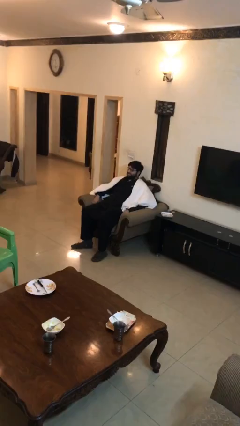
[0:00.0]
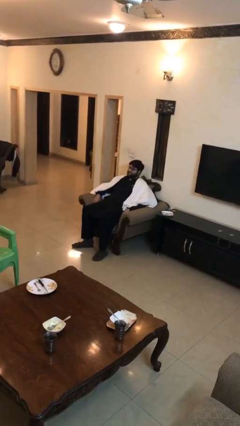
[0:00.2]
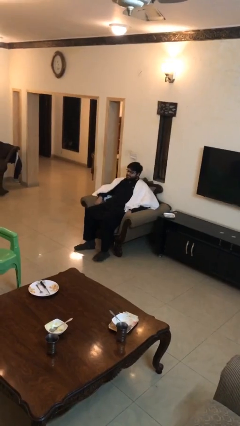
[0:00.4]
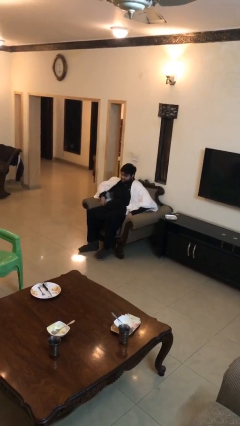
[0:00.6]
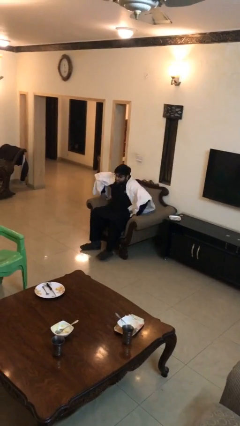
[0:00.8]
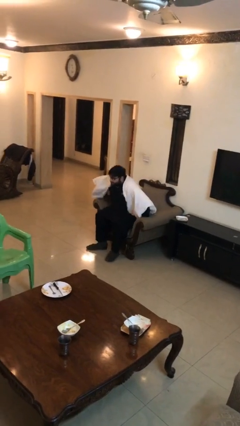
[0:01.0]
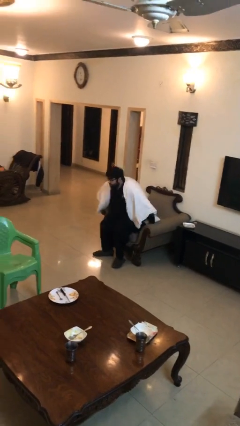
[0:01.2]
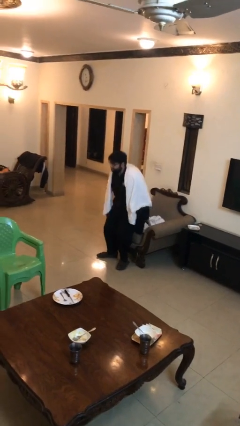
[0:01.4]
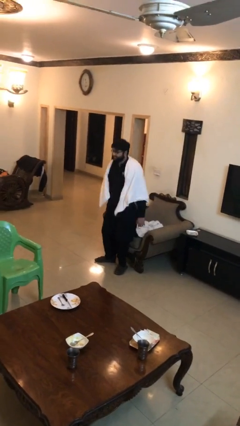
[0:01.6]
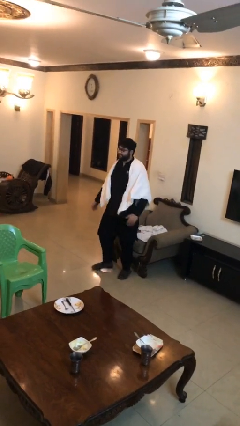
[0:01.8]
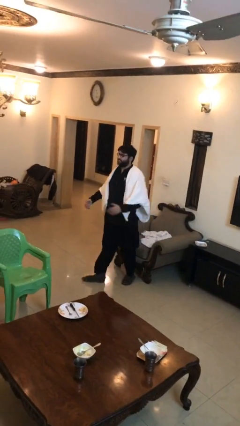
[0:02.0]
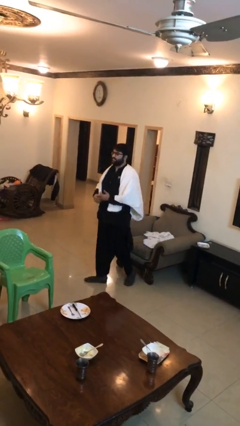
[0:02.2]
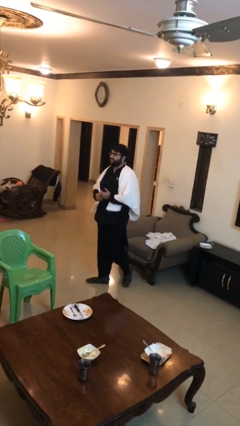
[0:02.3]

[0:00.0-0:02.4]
person stands up

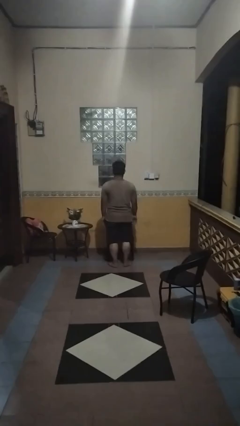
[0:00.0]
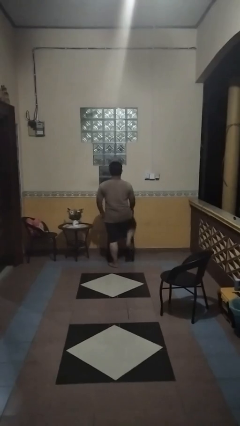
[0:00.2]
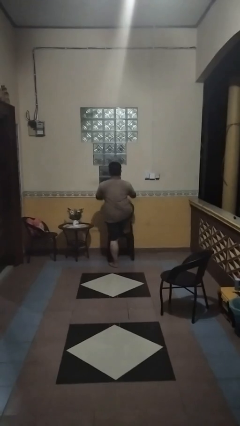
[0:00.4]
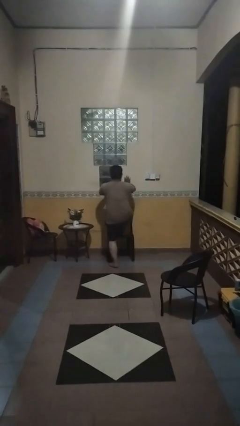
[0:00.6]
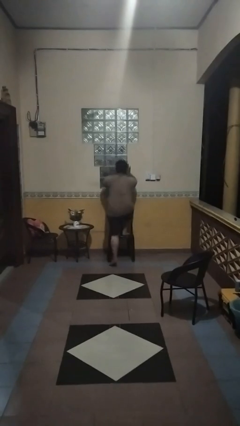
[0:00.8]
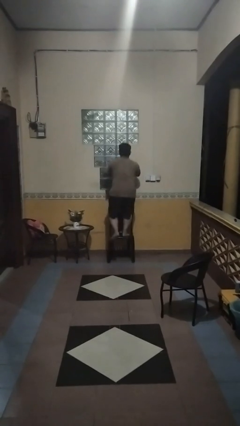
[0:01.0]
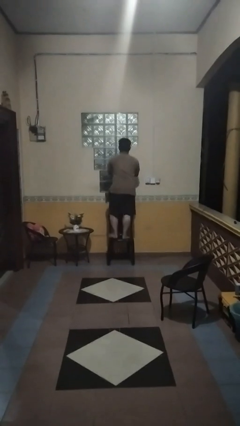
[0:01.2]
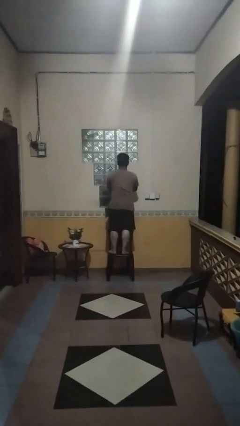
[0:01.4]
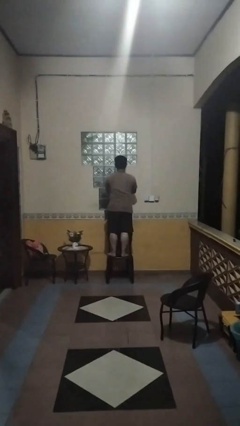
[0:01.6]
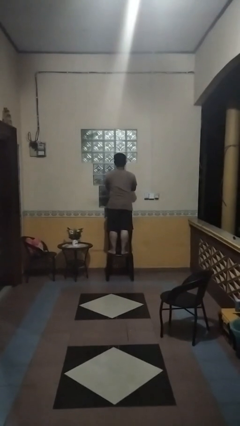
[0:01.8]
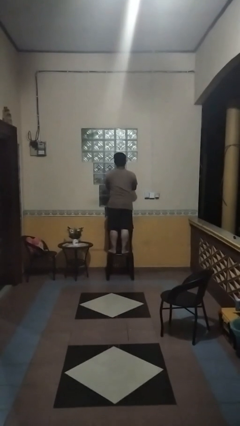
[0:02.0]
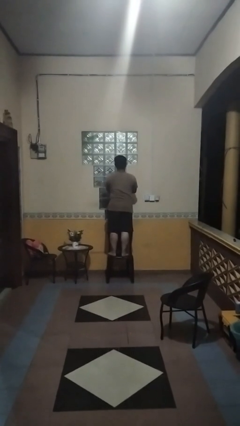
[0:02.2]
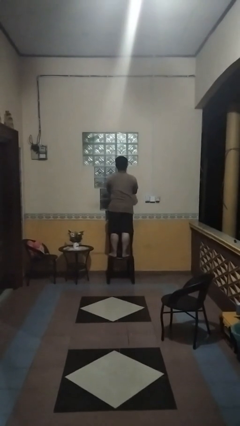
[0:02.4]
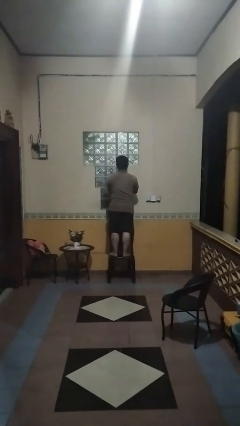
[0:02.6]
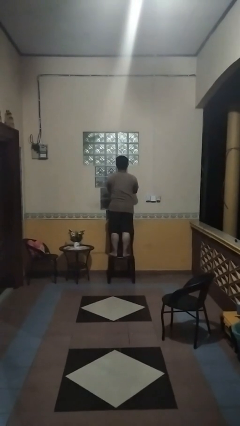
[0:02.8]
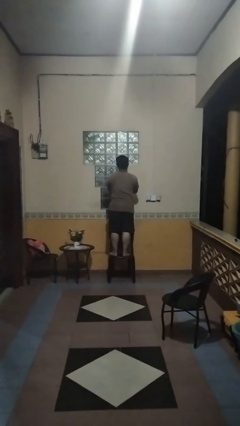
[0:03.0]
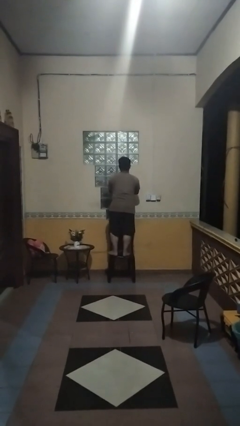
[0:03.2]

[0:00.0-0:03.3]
person climbs on chair

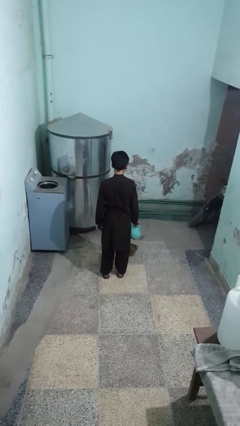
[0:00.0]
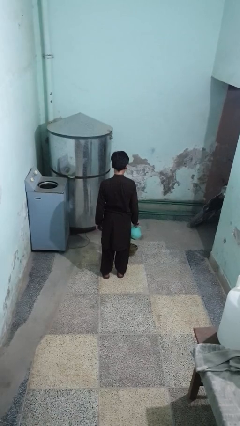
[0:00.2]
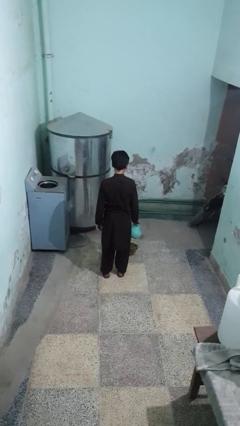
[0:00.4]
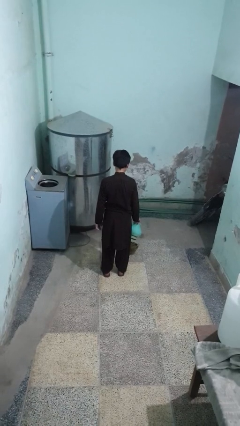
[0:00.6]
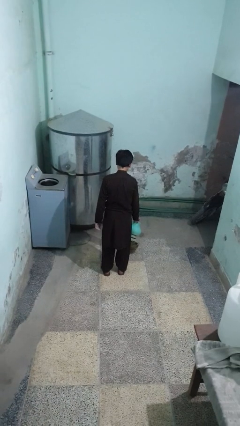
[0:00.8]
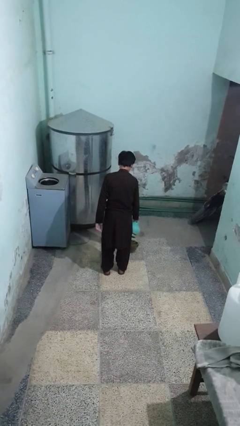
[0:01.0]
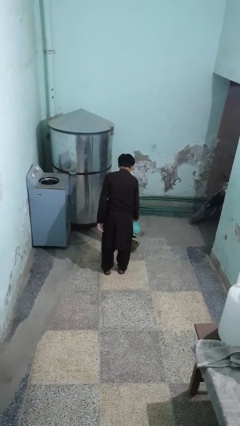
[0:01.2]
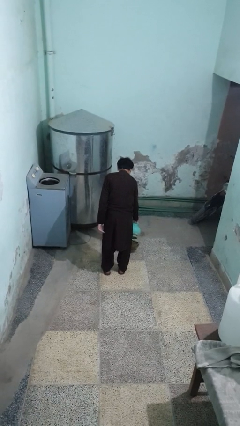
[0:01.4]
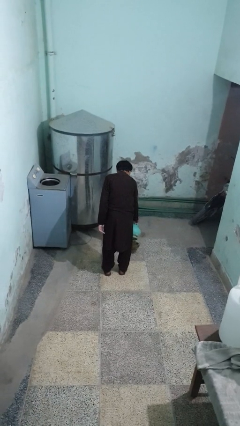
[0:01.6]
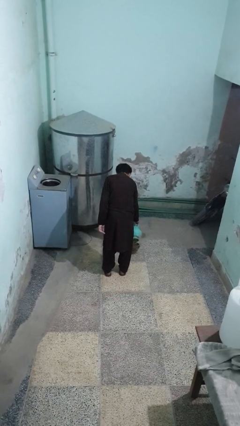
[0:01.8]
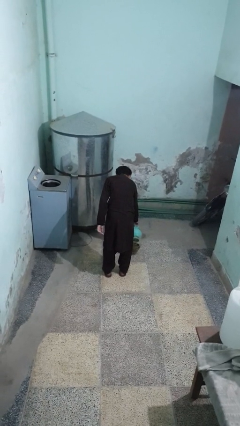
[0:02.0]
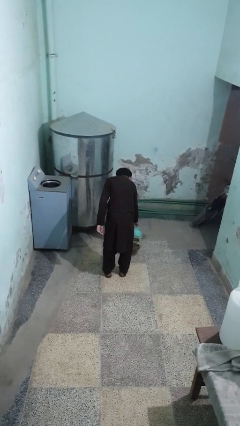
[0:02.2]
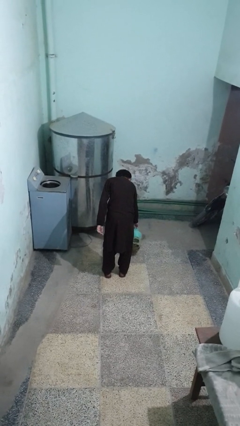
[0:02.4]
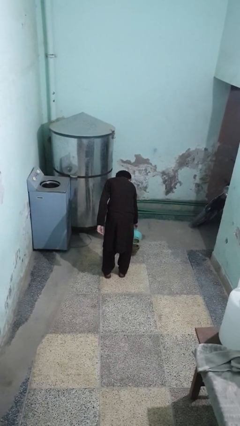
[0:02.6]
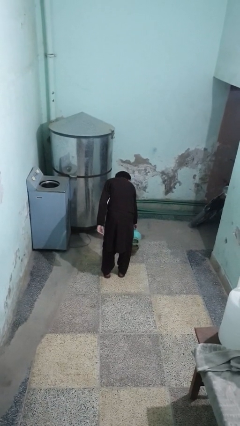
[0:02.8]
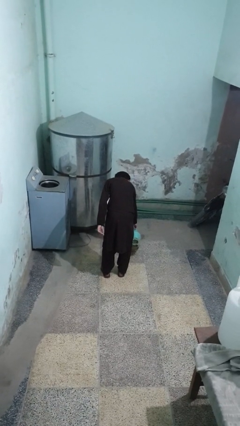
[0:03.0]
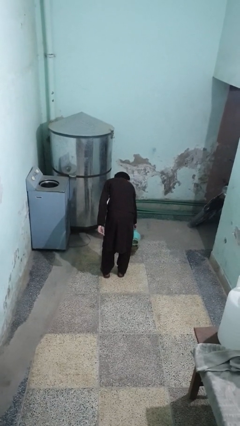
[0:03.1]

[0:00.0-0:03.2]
person waters houseplant

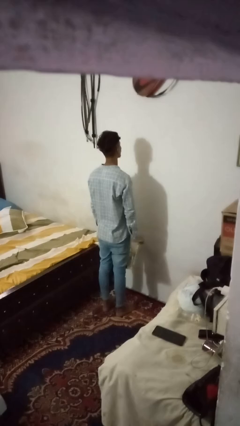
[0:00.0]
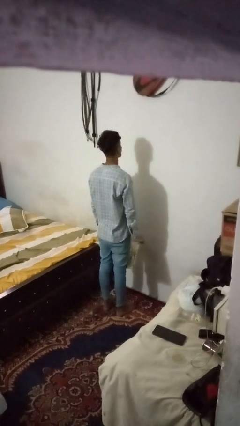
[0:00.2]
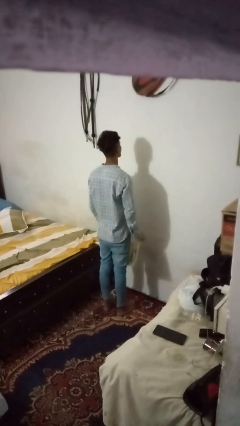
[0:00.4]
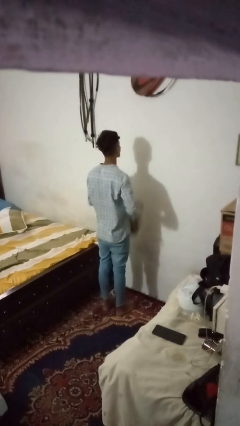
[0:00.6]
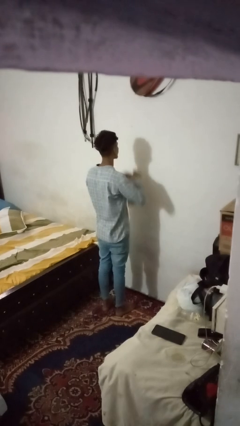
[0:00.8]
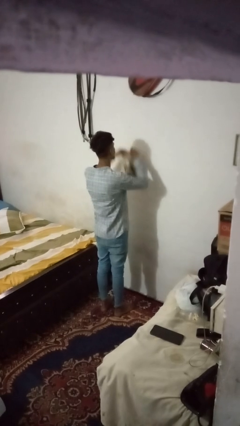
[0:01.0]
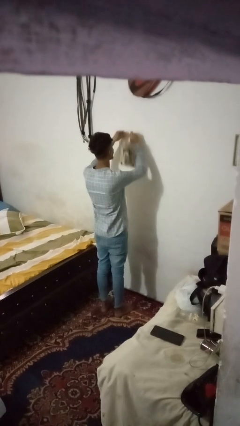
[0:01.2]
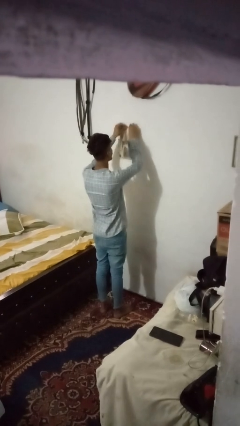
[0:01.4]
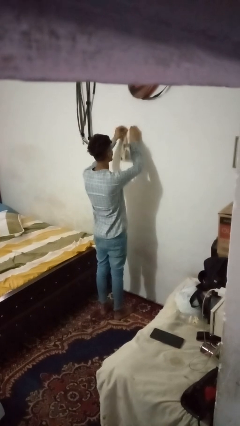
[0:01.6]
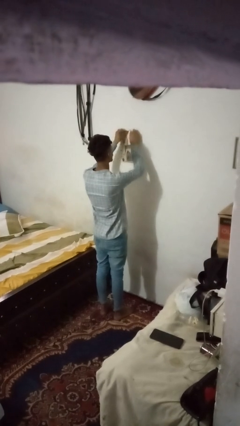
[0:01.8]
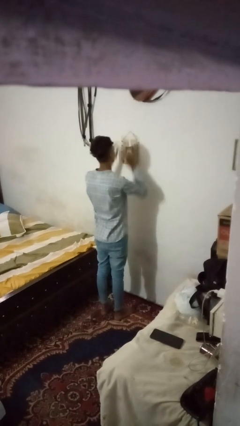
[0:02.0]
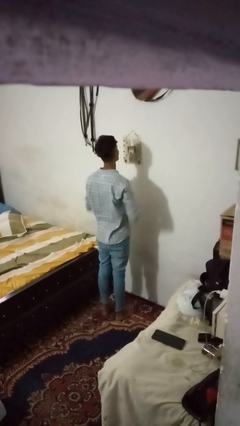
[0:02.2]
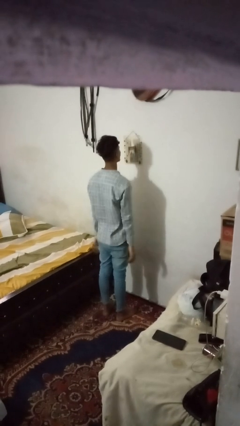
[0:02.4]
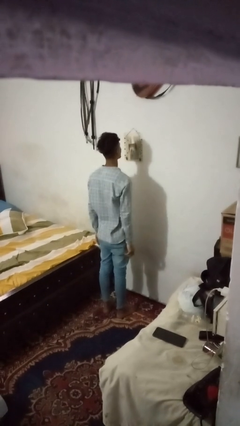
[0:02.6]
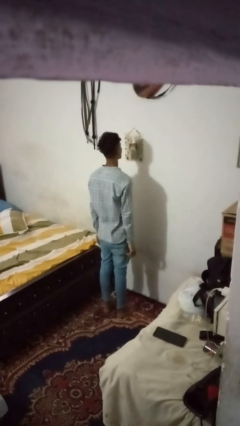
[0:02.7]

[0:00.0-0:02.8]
person puts up picture frame

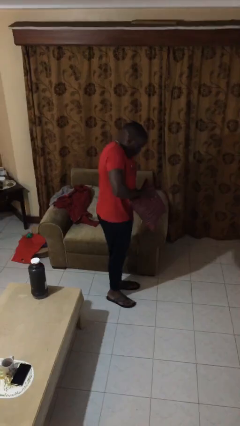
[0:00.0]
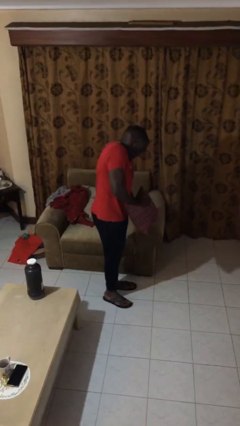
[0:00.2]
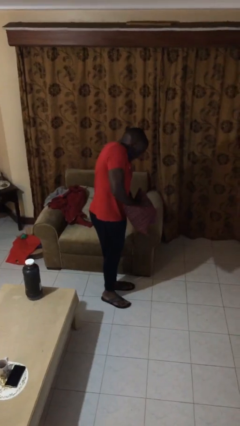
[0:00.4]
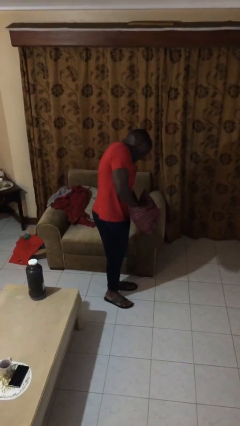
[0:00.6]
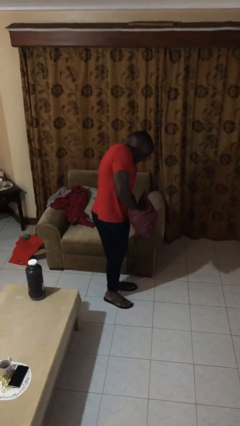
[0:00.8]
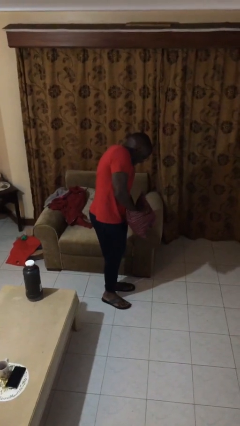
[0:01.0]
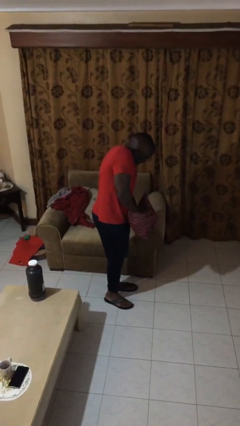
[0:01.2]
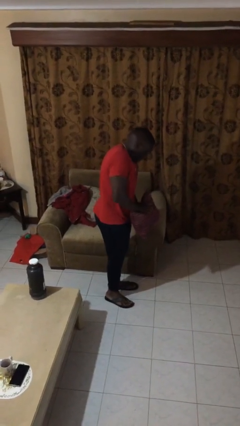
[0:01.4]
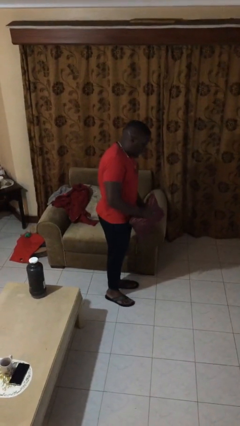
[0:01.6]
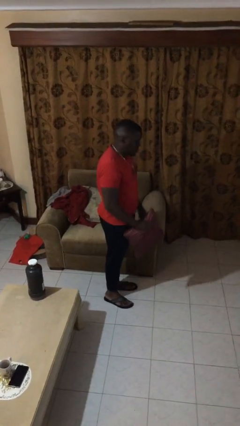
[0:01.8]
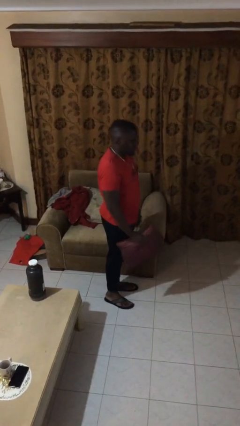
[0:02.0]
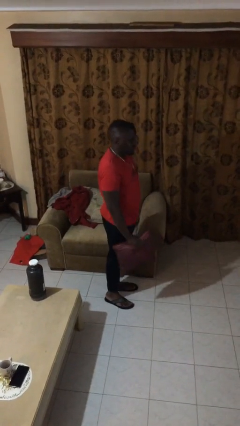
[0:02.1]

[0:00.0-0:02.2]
person squeezes object

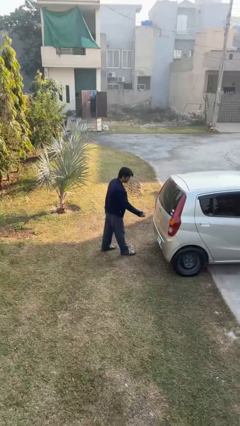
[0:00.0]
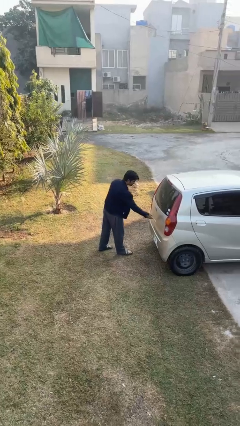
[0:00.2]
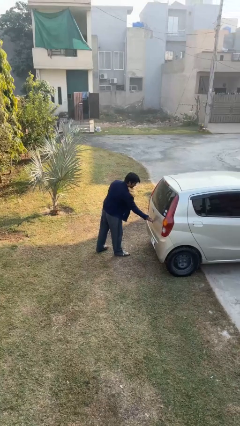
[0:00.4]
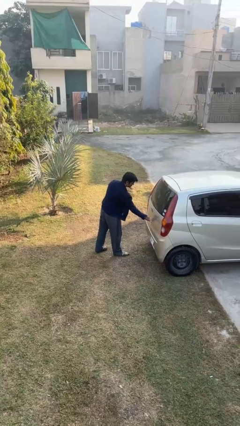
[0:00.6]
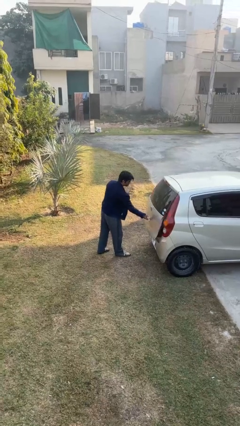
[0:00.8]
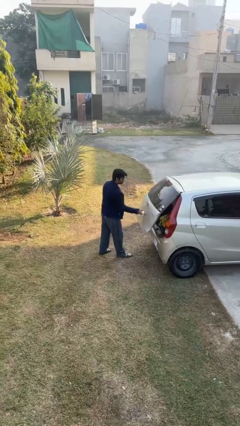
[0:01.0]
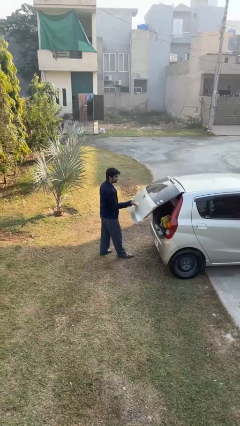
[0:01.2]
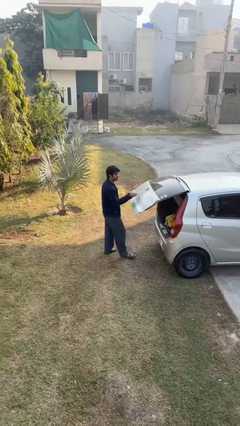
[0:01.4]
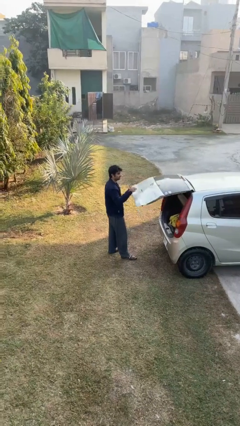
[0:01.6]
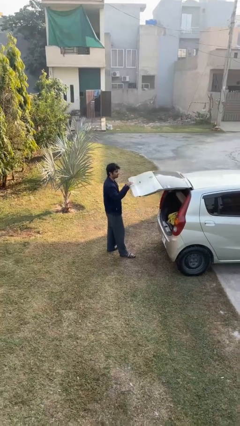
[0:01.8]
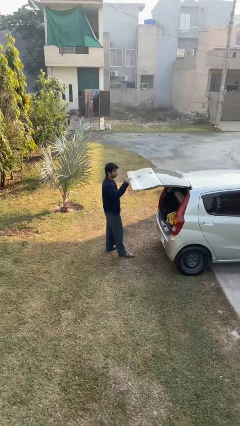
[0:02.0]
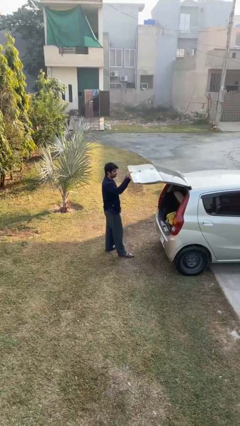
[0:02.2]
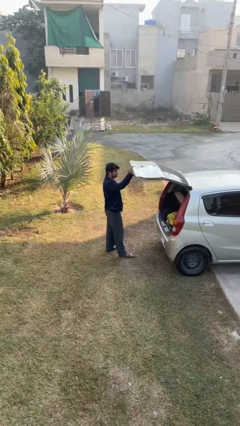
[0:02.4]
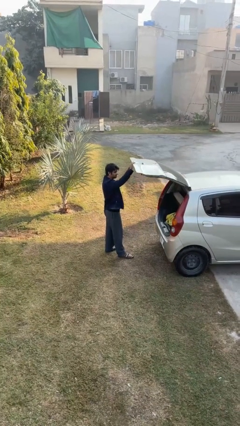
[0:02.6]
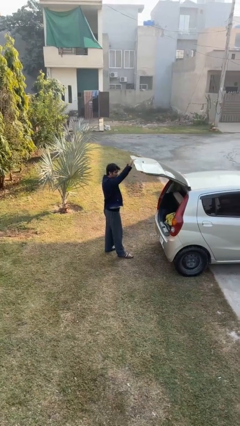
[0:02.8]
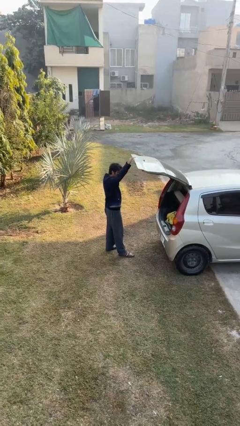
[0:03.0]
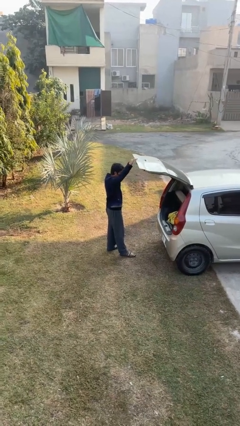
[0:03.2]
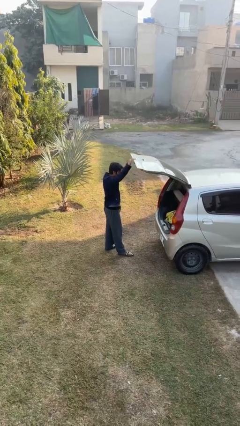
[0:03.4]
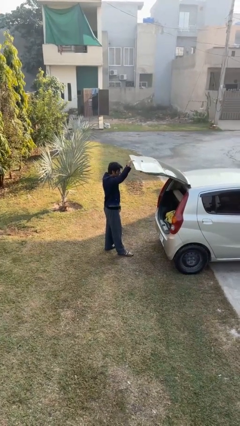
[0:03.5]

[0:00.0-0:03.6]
person opens car trunk
